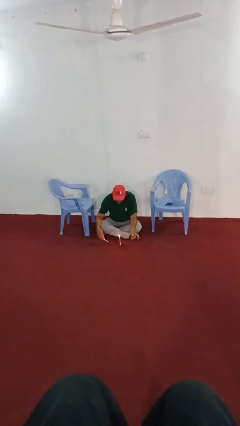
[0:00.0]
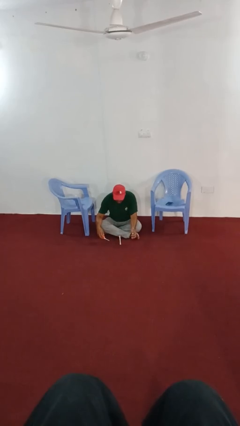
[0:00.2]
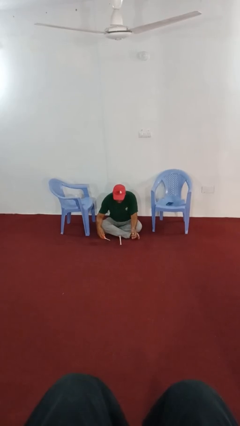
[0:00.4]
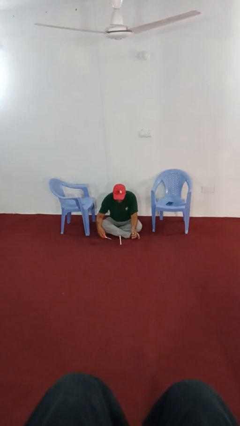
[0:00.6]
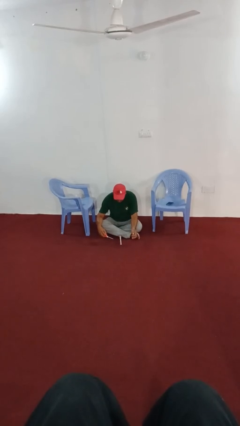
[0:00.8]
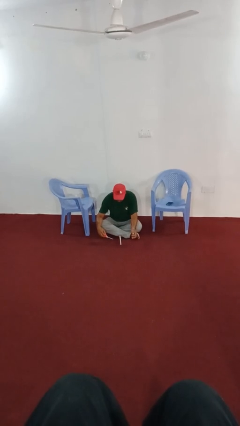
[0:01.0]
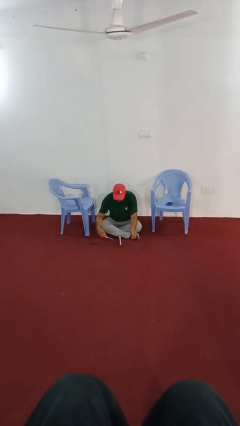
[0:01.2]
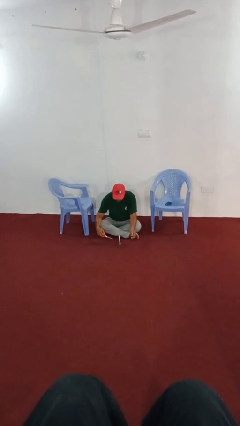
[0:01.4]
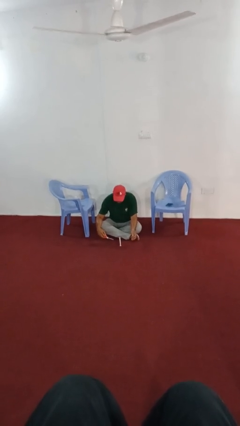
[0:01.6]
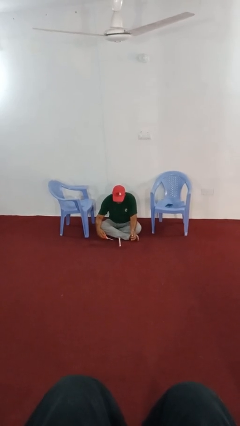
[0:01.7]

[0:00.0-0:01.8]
person extinguishes candle

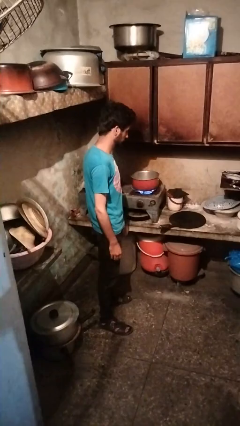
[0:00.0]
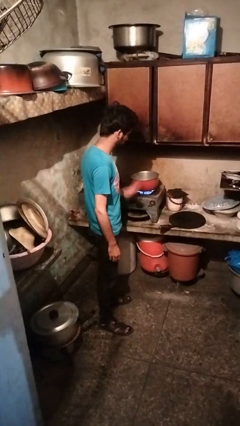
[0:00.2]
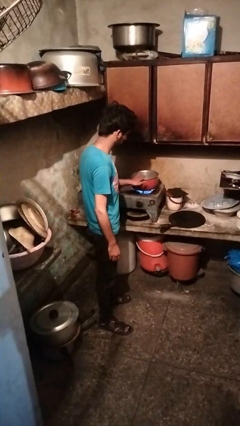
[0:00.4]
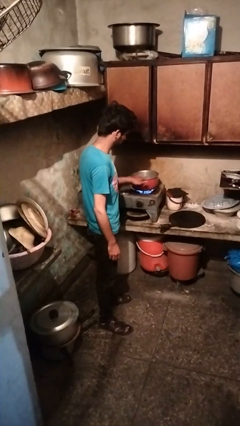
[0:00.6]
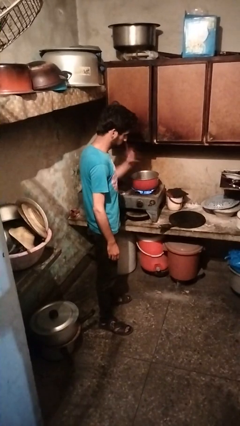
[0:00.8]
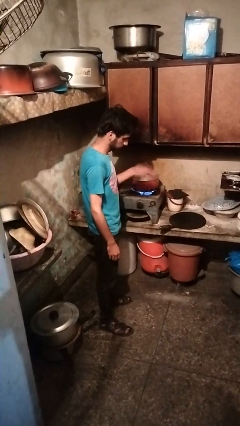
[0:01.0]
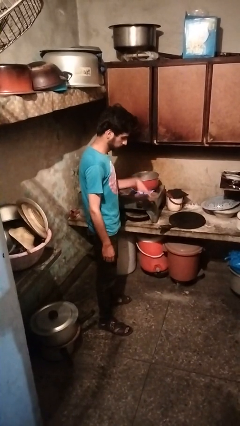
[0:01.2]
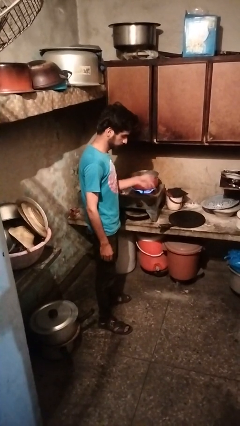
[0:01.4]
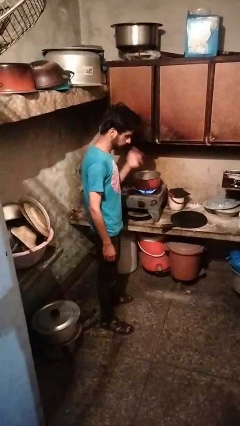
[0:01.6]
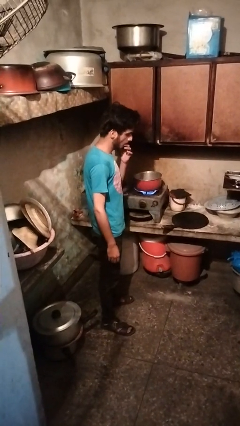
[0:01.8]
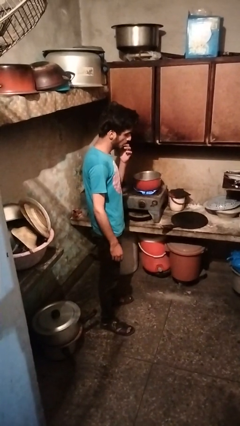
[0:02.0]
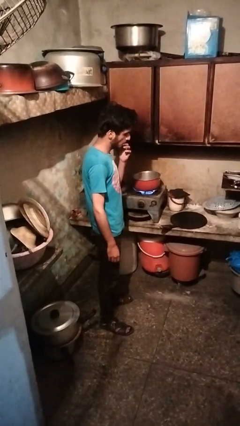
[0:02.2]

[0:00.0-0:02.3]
person burns hand

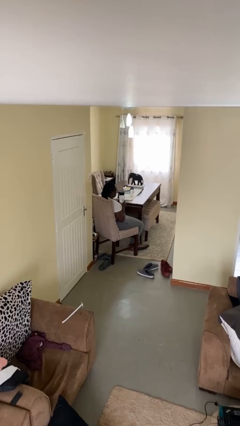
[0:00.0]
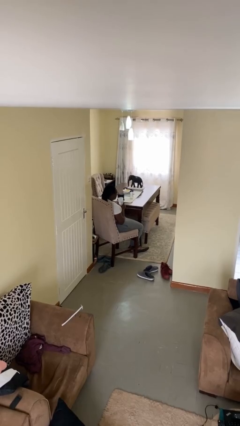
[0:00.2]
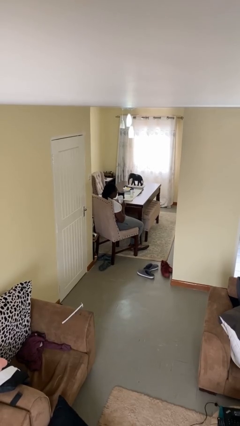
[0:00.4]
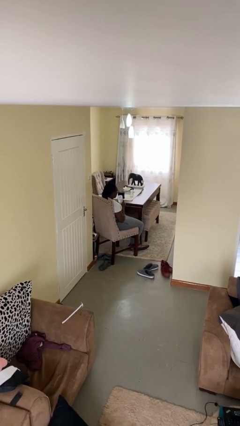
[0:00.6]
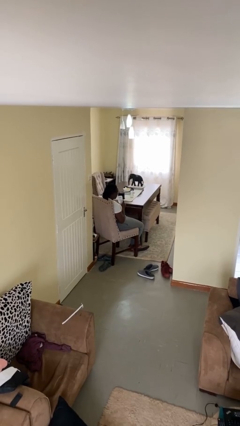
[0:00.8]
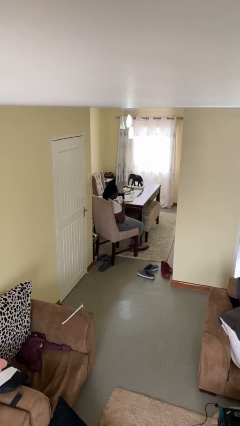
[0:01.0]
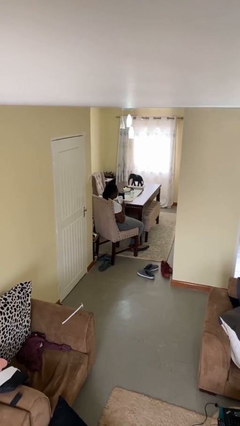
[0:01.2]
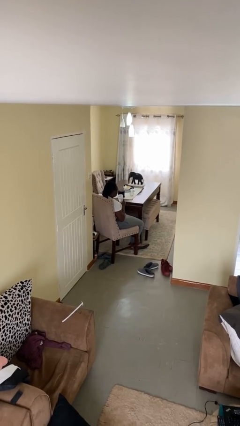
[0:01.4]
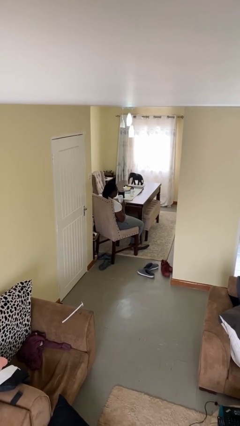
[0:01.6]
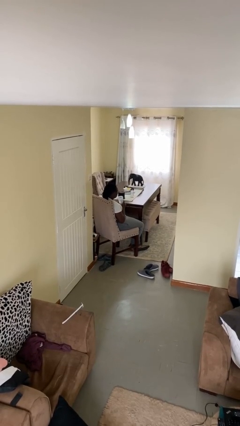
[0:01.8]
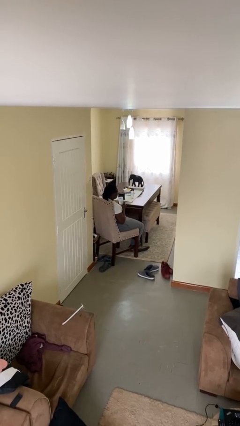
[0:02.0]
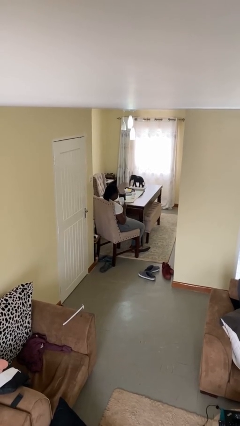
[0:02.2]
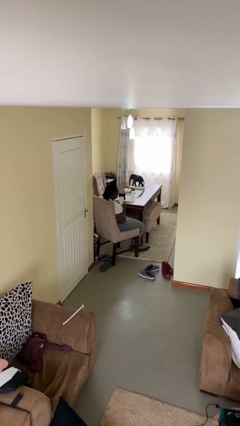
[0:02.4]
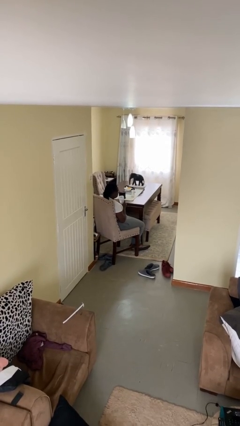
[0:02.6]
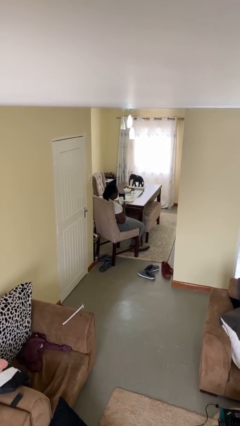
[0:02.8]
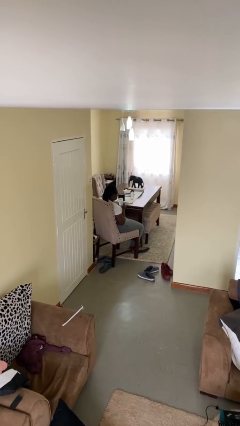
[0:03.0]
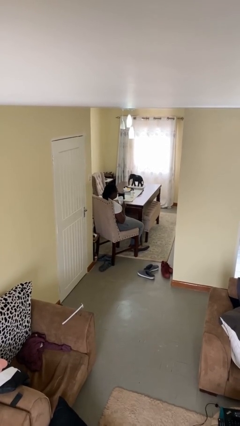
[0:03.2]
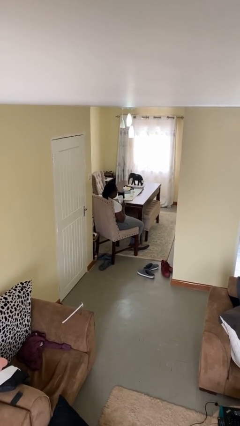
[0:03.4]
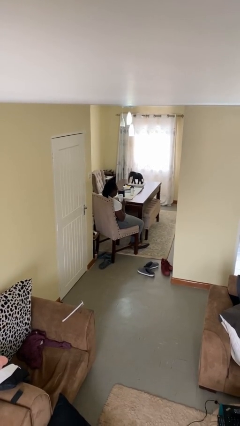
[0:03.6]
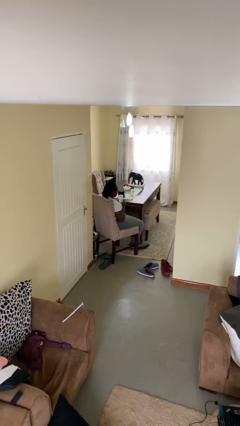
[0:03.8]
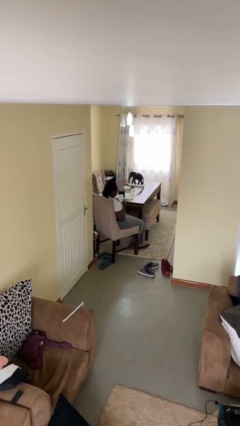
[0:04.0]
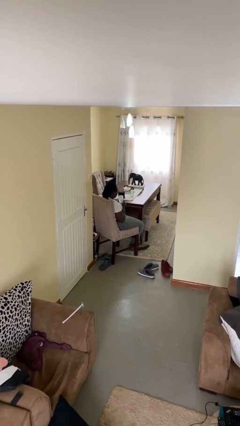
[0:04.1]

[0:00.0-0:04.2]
person drinks from straw

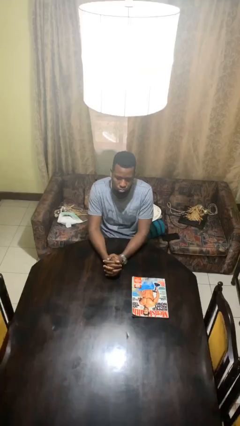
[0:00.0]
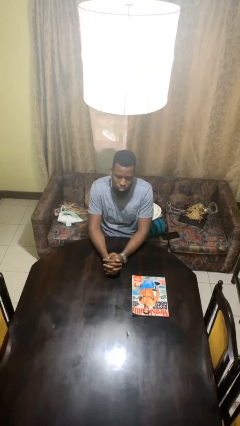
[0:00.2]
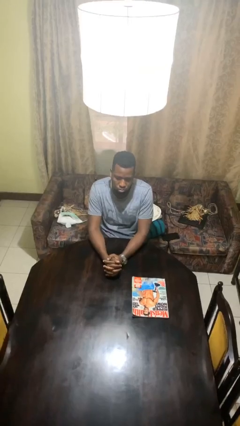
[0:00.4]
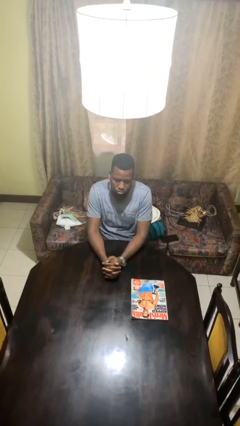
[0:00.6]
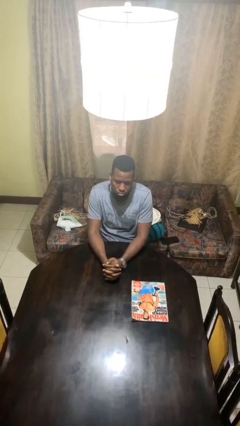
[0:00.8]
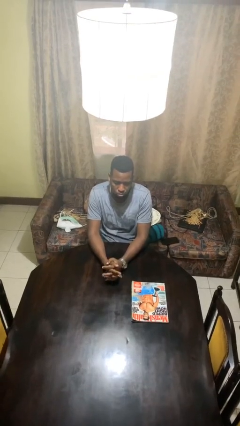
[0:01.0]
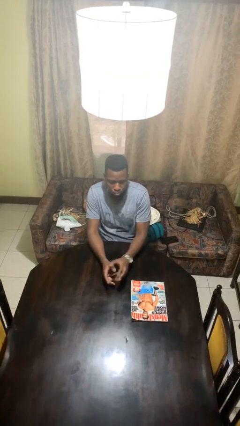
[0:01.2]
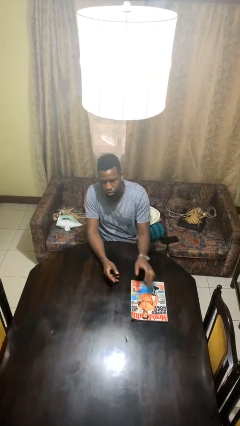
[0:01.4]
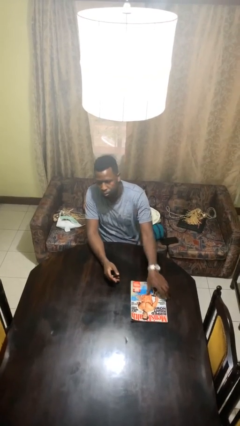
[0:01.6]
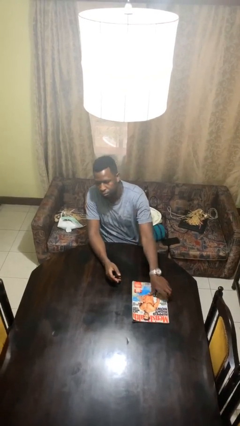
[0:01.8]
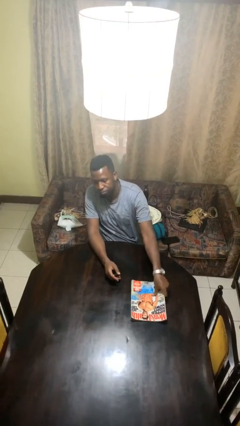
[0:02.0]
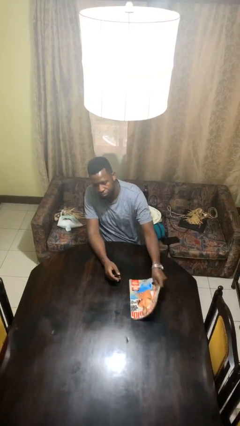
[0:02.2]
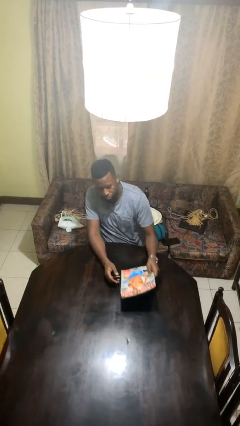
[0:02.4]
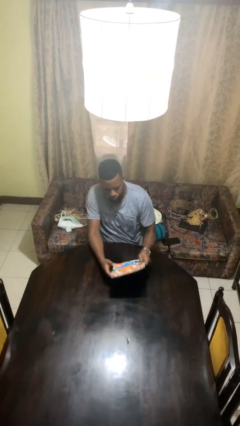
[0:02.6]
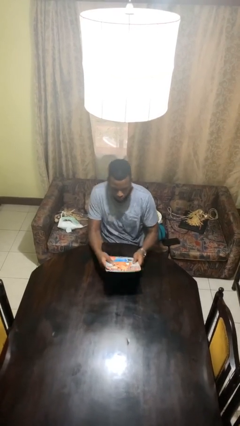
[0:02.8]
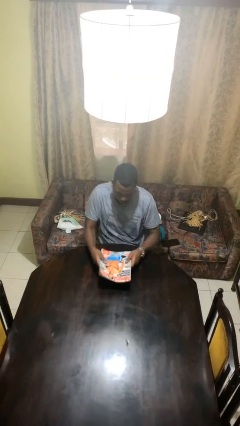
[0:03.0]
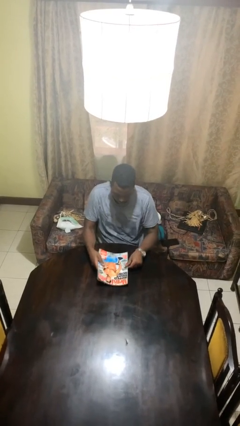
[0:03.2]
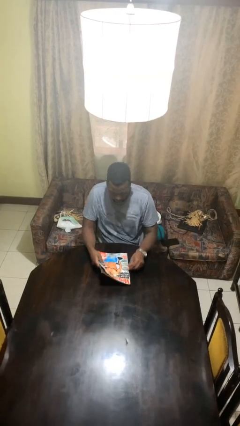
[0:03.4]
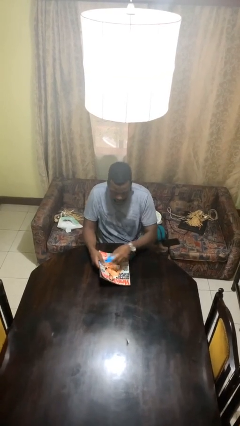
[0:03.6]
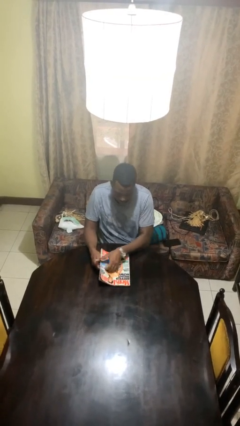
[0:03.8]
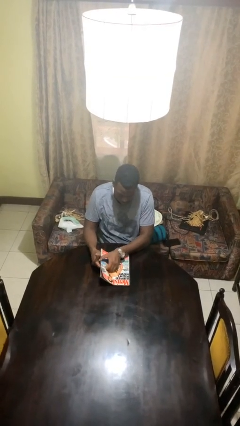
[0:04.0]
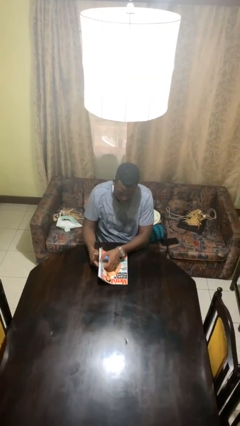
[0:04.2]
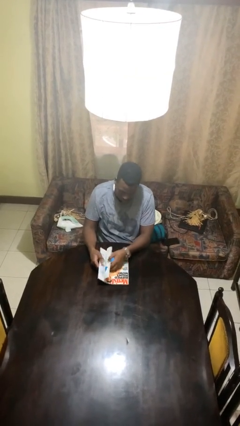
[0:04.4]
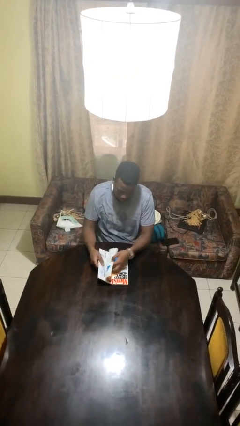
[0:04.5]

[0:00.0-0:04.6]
person picks up object from table

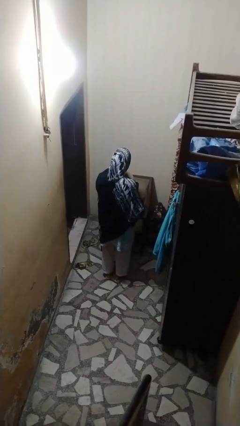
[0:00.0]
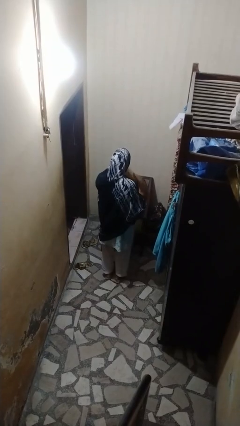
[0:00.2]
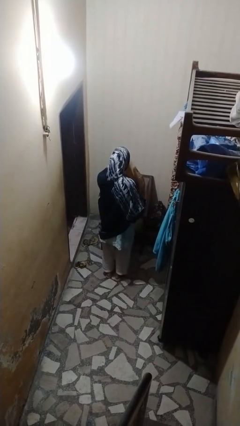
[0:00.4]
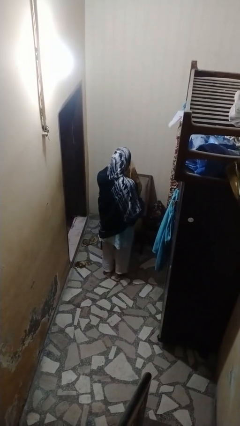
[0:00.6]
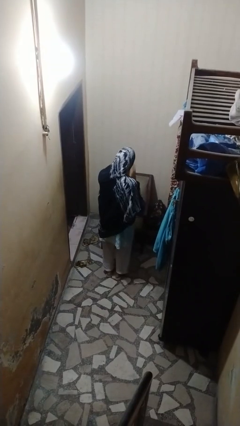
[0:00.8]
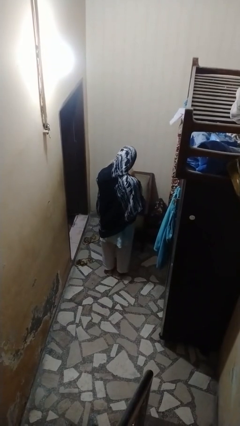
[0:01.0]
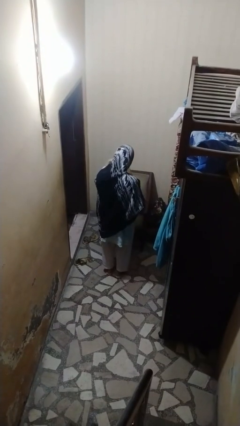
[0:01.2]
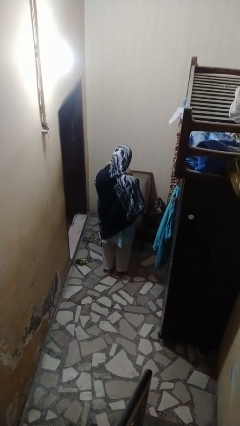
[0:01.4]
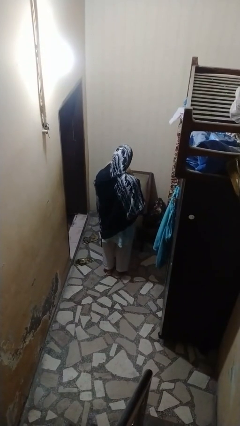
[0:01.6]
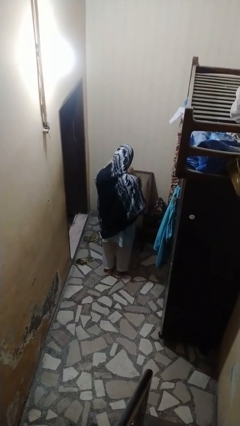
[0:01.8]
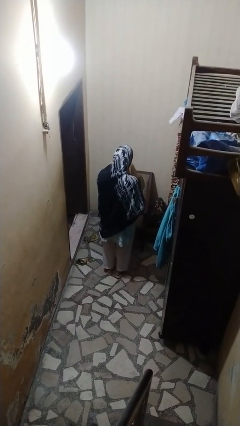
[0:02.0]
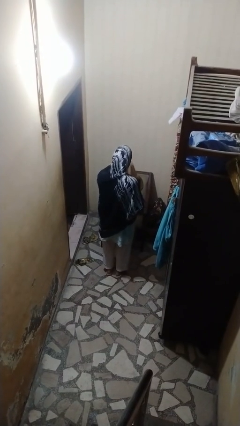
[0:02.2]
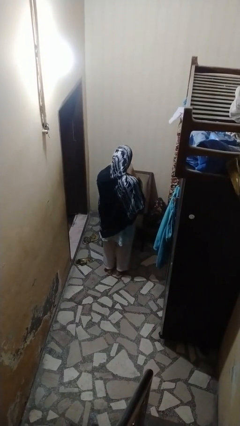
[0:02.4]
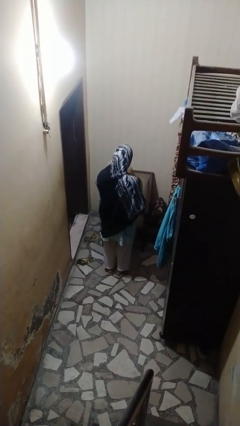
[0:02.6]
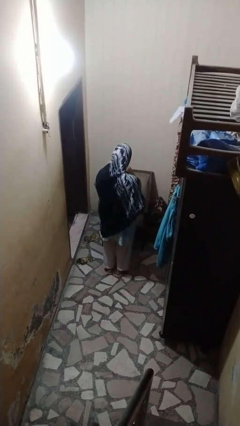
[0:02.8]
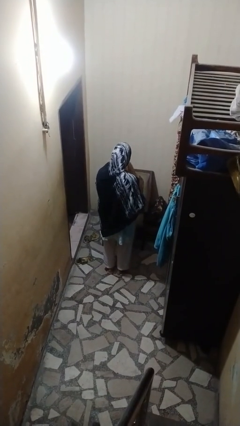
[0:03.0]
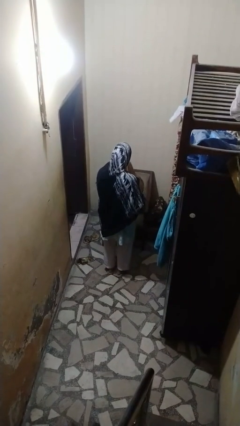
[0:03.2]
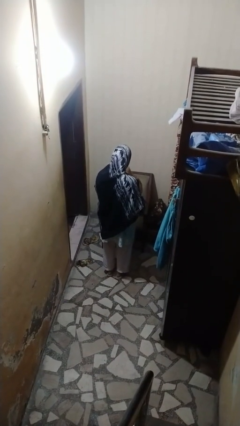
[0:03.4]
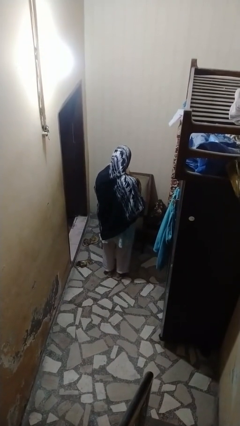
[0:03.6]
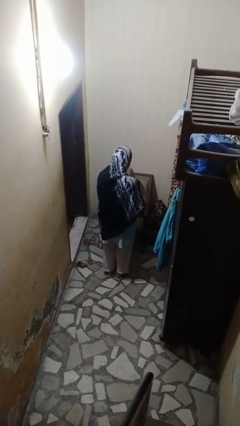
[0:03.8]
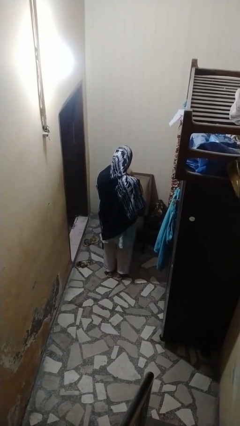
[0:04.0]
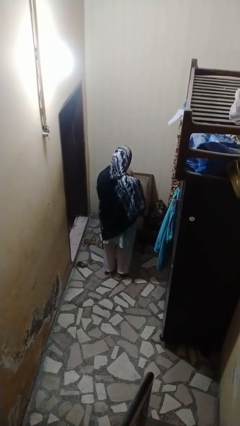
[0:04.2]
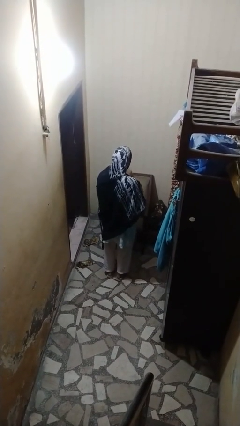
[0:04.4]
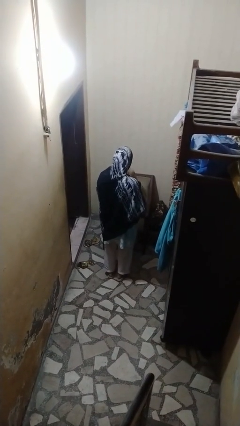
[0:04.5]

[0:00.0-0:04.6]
person searches in bag
